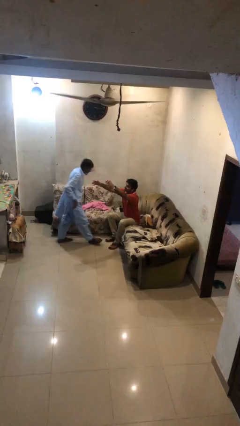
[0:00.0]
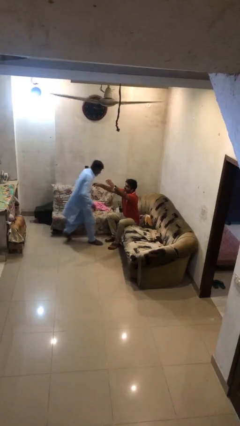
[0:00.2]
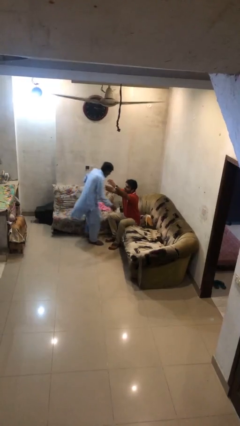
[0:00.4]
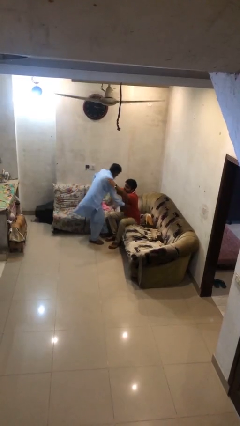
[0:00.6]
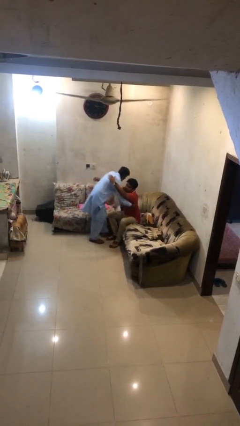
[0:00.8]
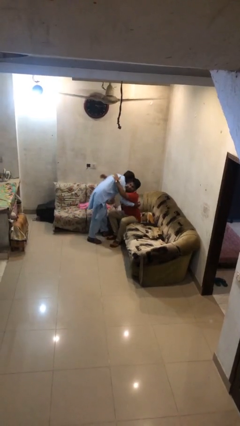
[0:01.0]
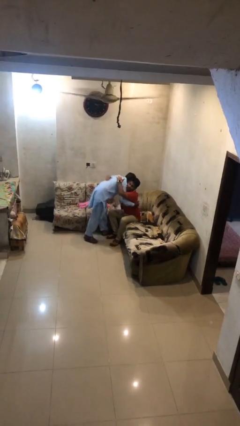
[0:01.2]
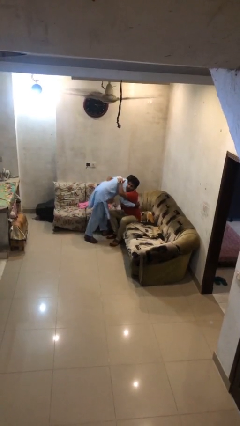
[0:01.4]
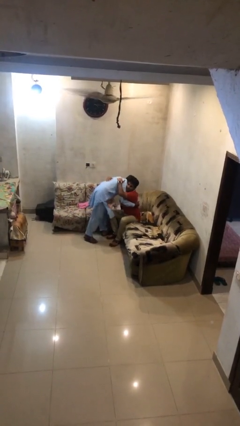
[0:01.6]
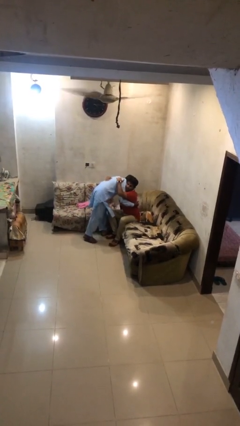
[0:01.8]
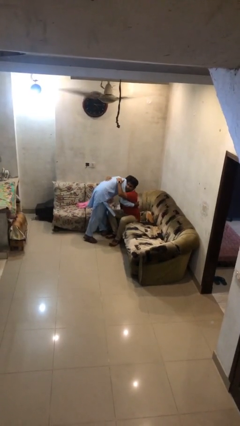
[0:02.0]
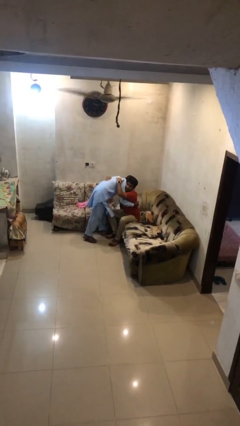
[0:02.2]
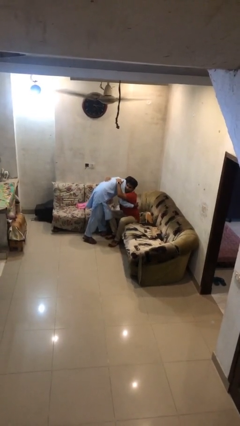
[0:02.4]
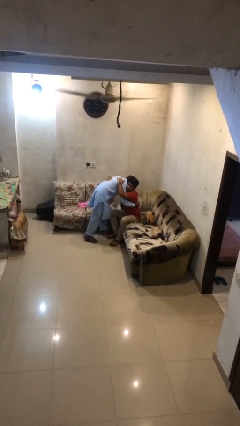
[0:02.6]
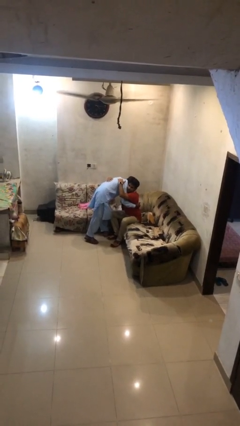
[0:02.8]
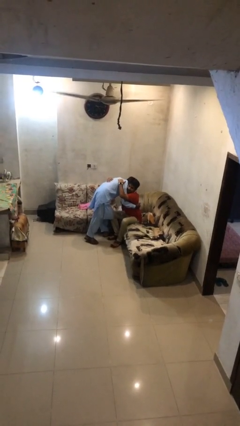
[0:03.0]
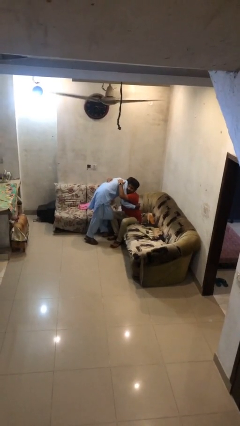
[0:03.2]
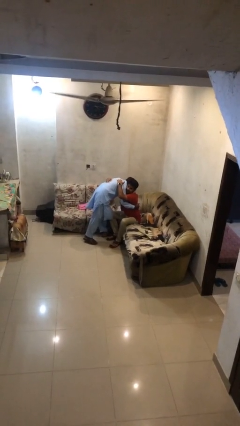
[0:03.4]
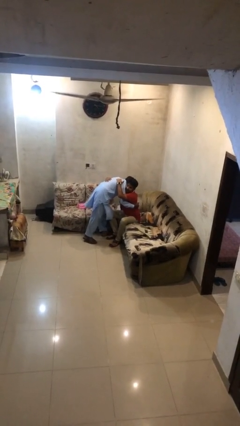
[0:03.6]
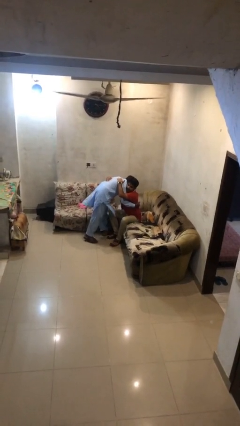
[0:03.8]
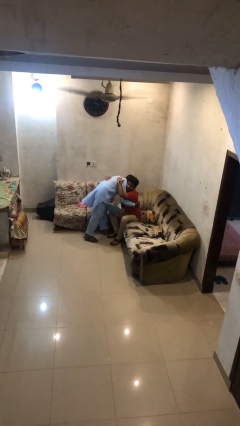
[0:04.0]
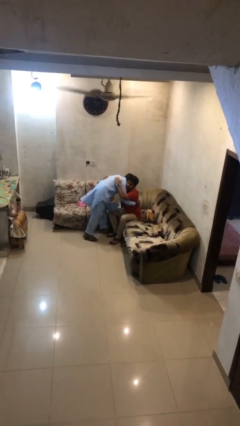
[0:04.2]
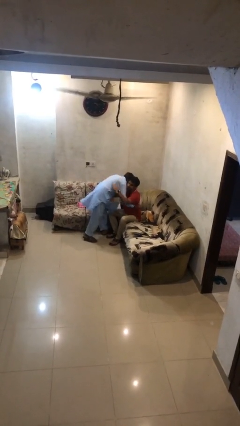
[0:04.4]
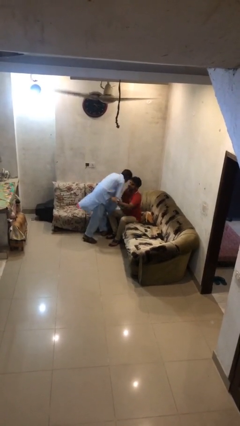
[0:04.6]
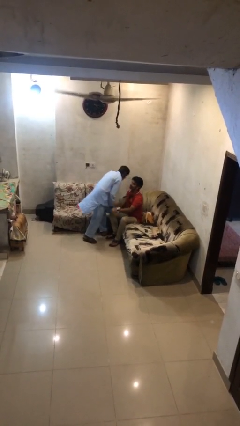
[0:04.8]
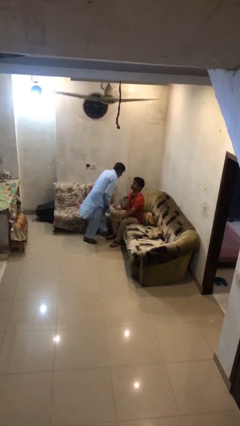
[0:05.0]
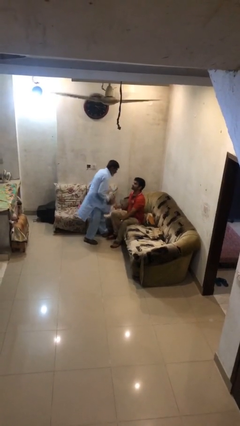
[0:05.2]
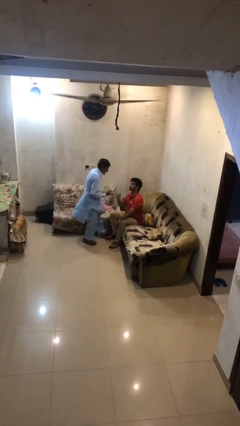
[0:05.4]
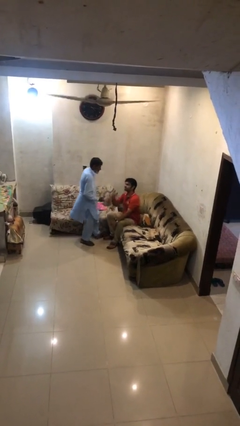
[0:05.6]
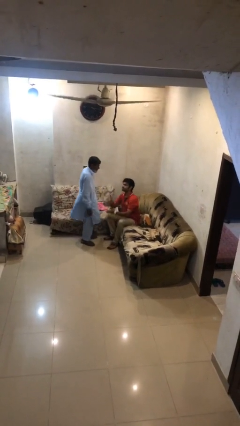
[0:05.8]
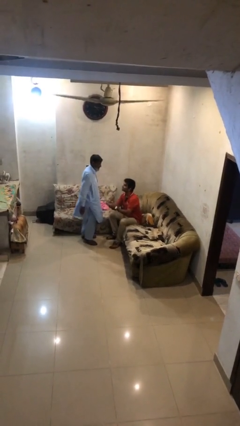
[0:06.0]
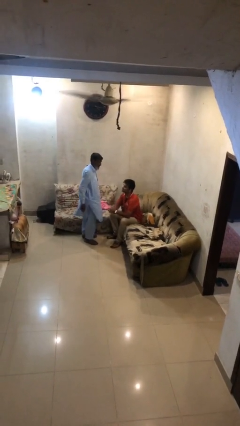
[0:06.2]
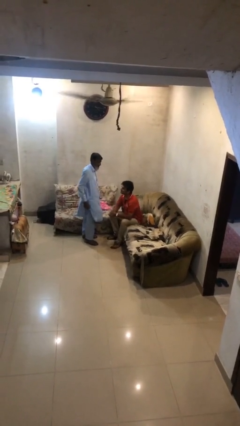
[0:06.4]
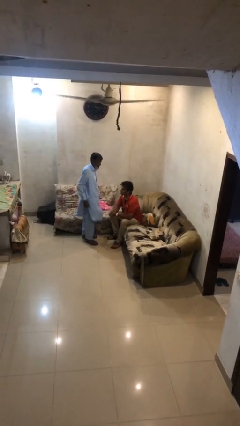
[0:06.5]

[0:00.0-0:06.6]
person embraces person

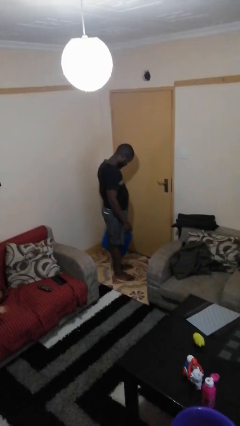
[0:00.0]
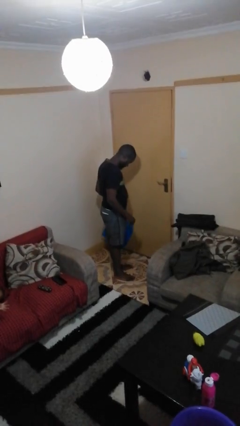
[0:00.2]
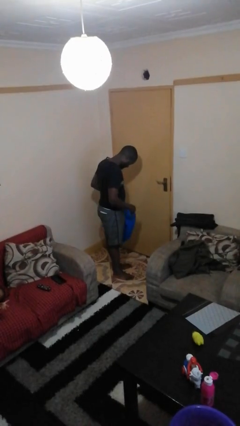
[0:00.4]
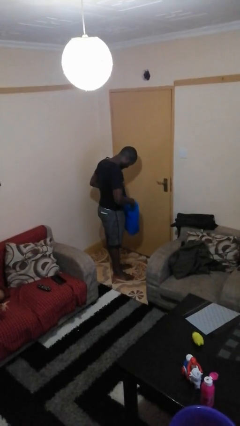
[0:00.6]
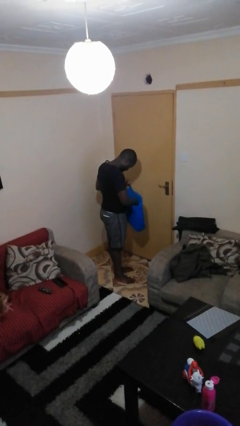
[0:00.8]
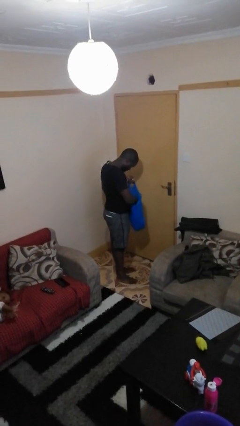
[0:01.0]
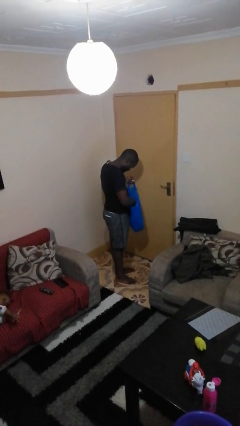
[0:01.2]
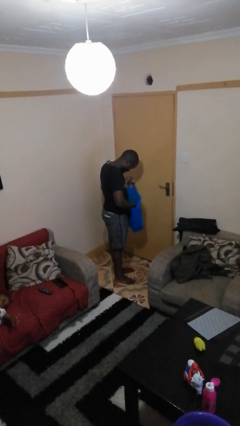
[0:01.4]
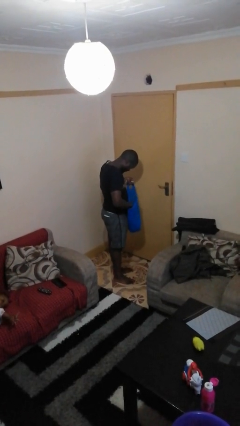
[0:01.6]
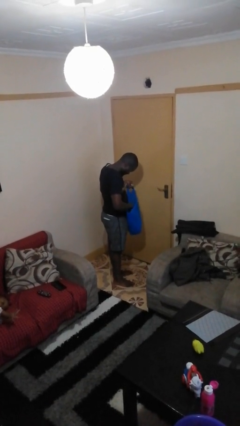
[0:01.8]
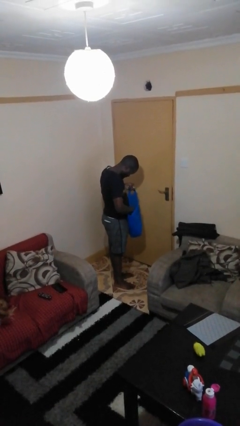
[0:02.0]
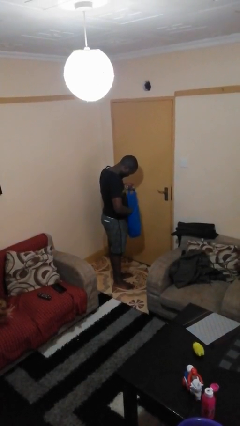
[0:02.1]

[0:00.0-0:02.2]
person searches in bag

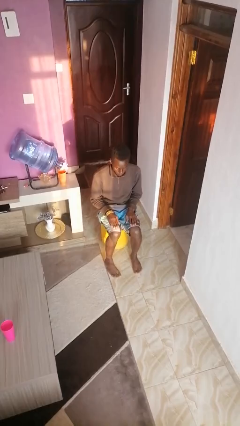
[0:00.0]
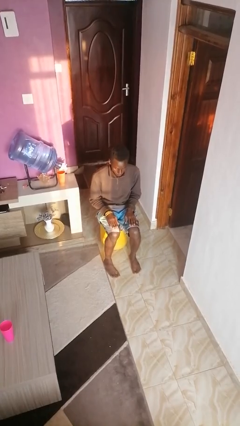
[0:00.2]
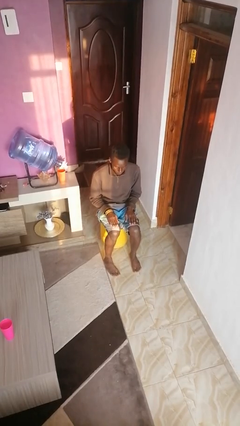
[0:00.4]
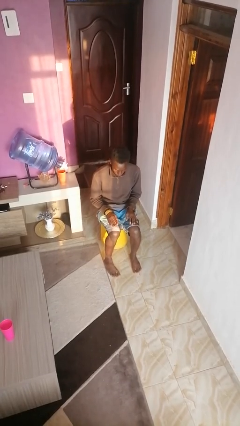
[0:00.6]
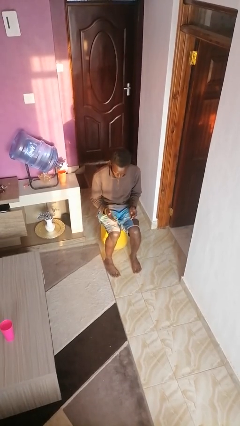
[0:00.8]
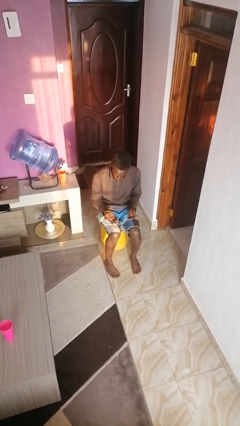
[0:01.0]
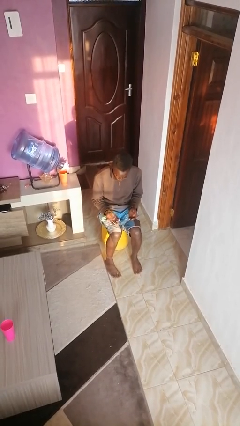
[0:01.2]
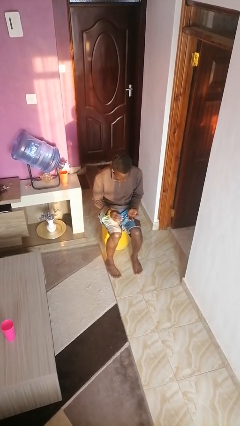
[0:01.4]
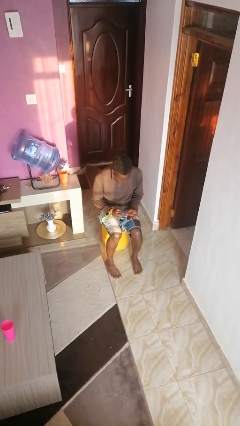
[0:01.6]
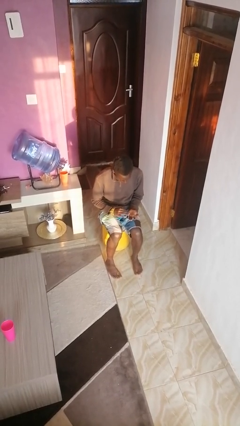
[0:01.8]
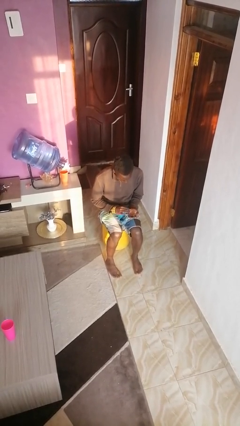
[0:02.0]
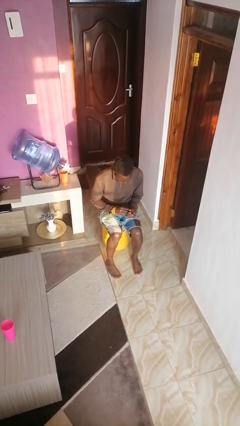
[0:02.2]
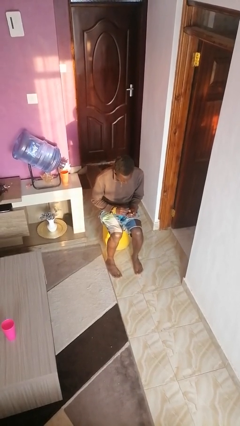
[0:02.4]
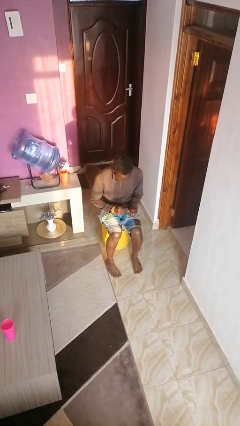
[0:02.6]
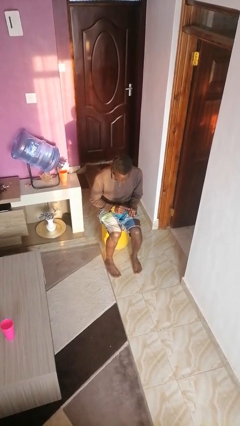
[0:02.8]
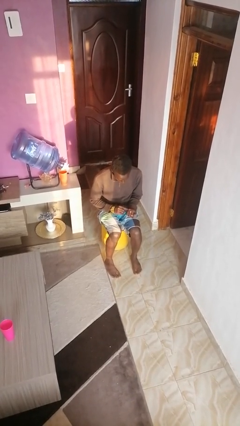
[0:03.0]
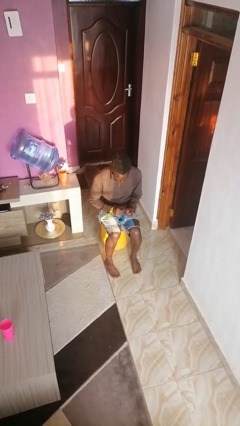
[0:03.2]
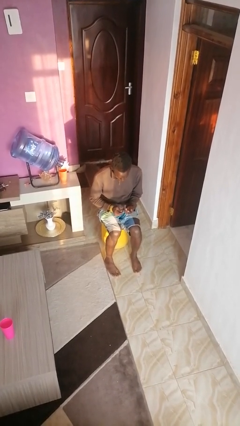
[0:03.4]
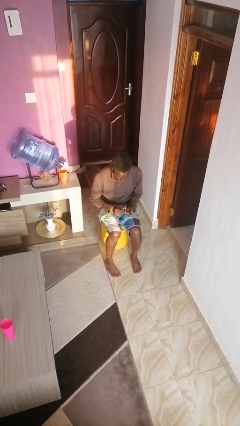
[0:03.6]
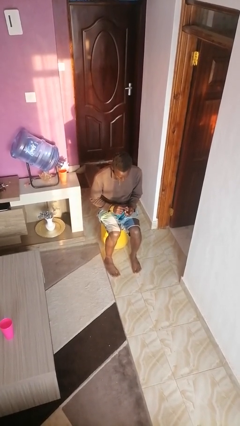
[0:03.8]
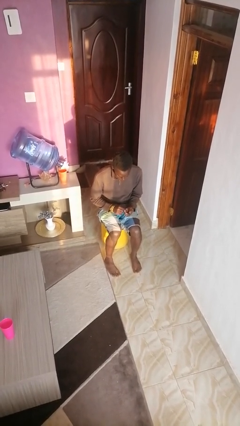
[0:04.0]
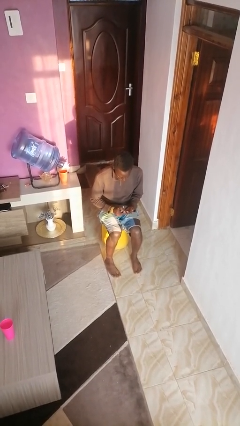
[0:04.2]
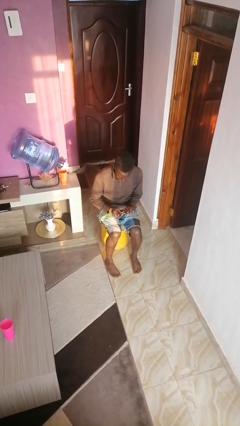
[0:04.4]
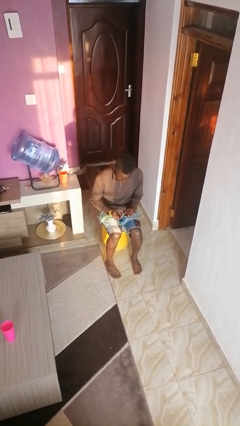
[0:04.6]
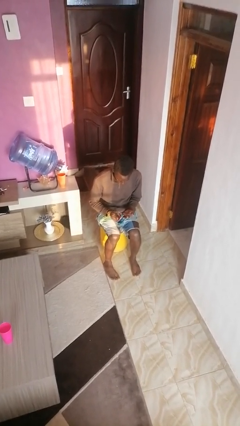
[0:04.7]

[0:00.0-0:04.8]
person looks at hands in lap

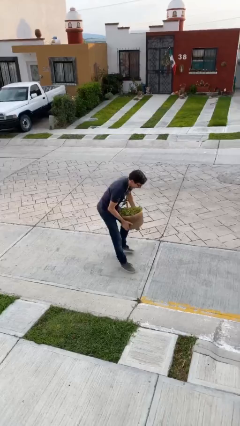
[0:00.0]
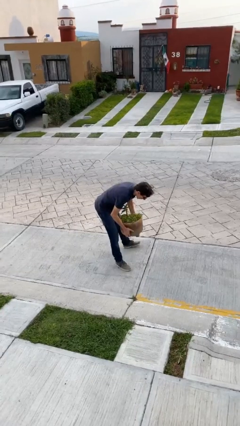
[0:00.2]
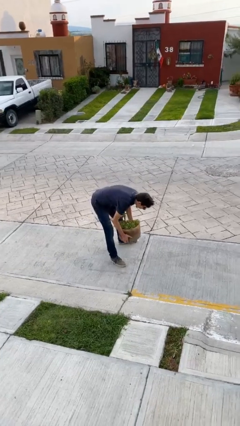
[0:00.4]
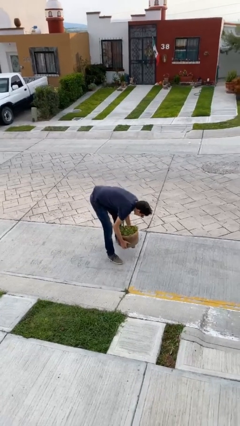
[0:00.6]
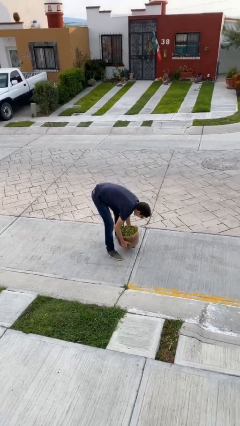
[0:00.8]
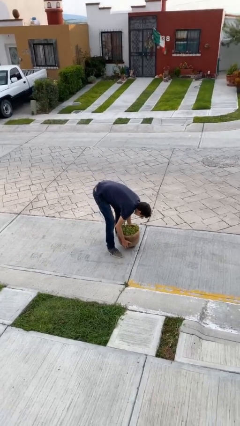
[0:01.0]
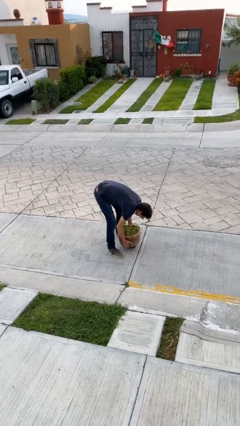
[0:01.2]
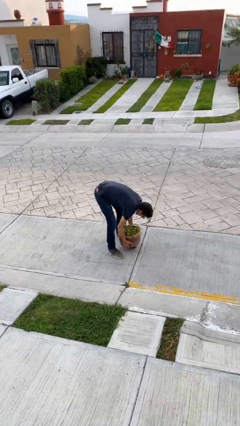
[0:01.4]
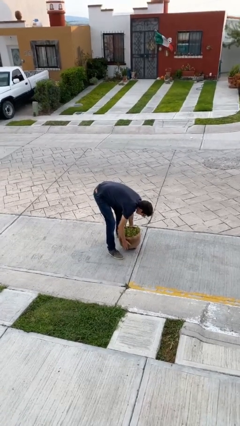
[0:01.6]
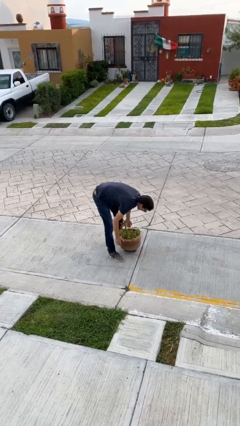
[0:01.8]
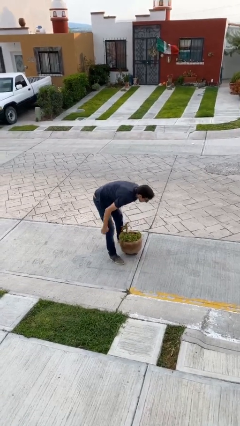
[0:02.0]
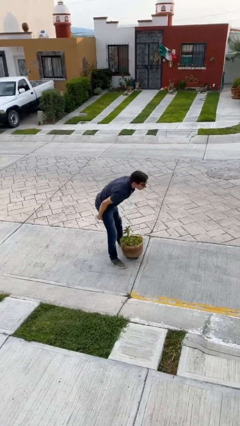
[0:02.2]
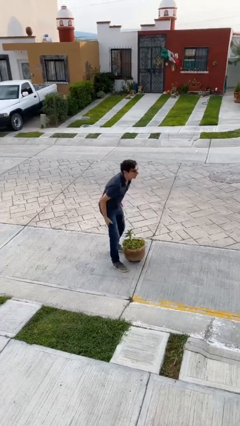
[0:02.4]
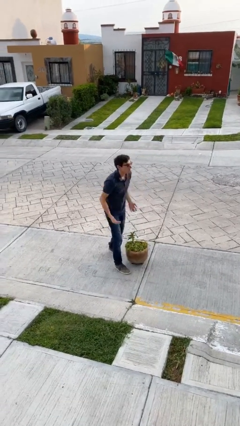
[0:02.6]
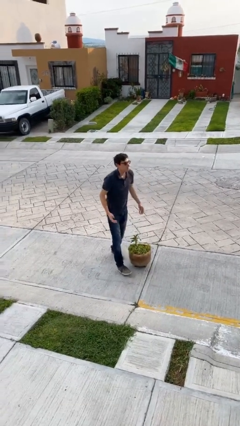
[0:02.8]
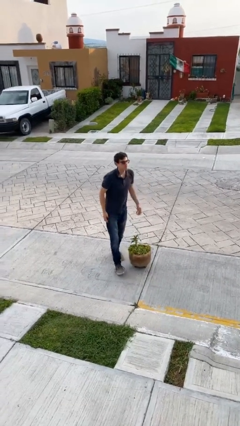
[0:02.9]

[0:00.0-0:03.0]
person puts down object on floor

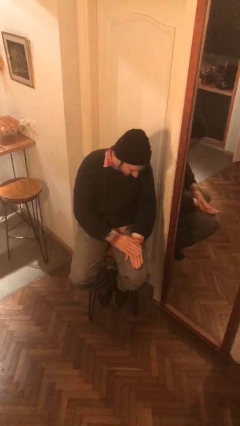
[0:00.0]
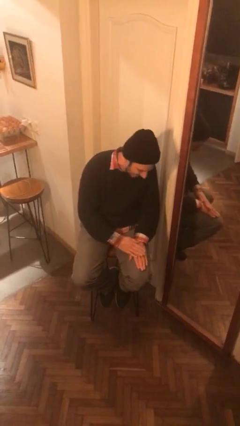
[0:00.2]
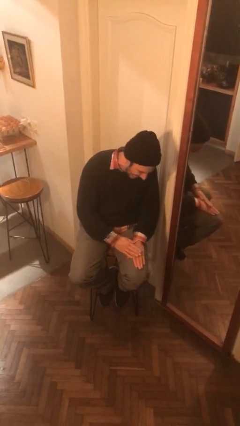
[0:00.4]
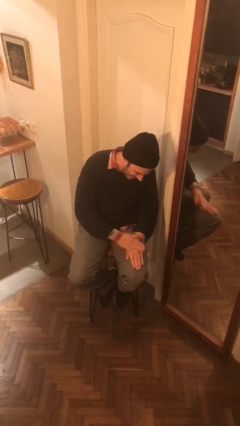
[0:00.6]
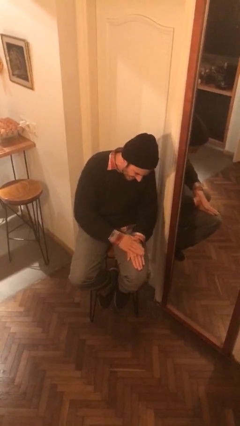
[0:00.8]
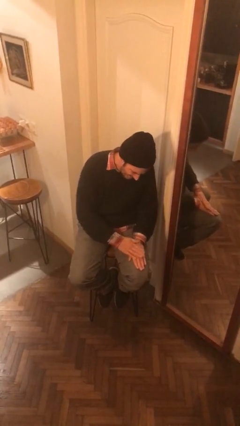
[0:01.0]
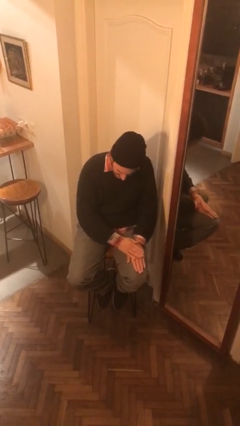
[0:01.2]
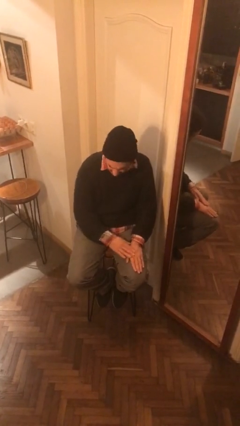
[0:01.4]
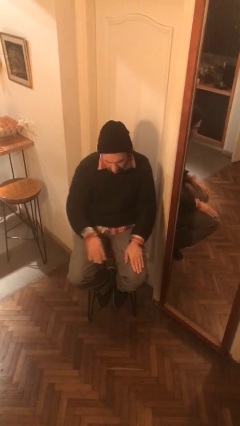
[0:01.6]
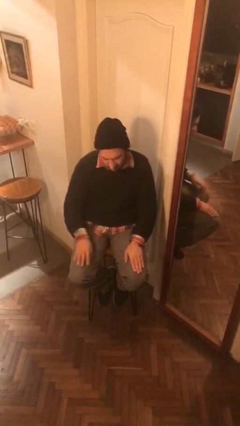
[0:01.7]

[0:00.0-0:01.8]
person swats bug
